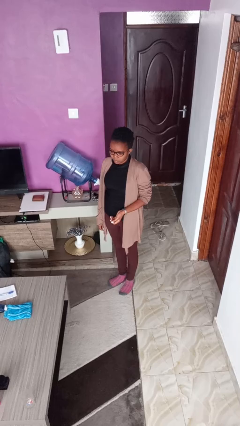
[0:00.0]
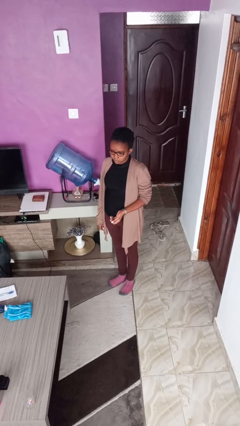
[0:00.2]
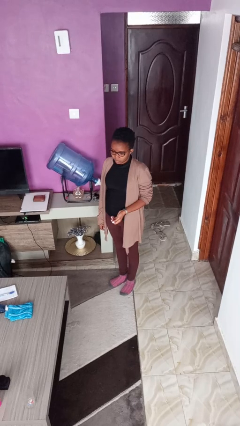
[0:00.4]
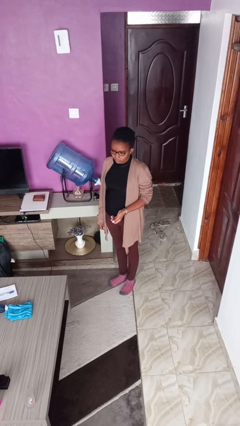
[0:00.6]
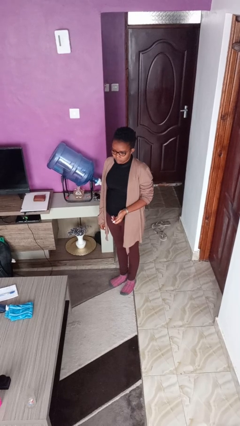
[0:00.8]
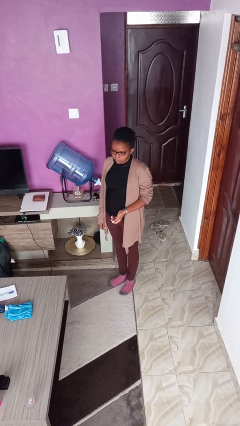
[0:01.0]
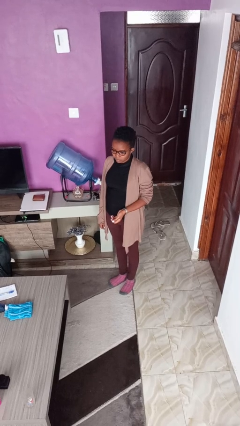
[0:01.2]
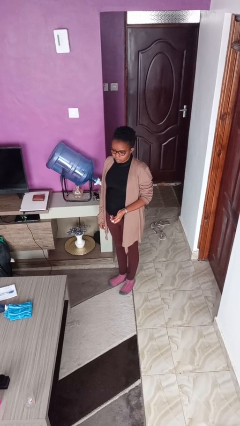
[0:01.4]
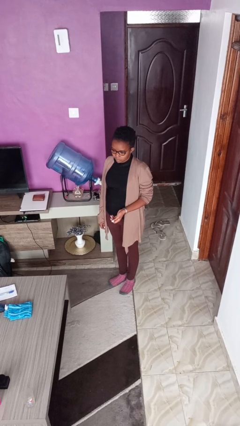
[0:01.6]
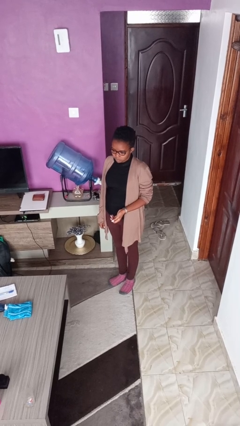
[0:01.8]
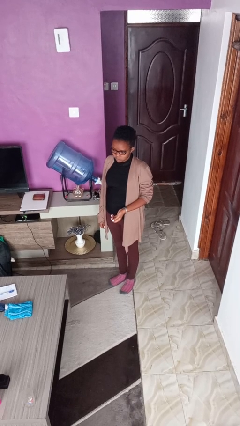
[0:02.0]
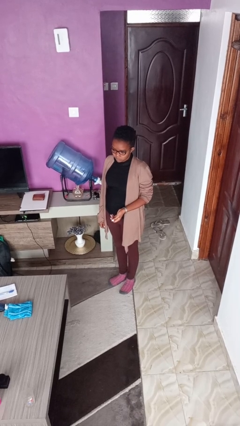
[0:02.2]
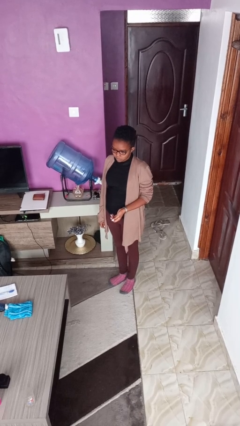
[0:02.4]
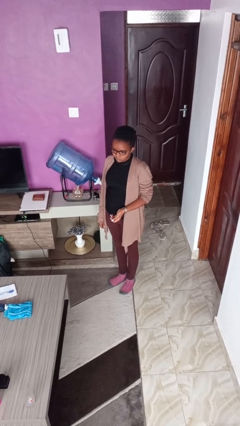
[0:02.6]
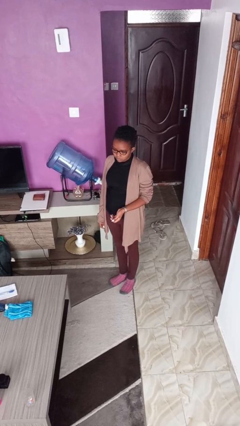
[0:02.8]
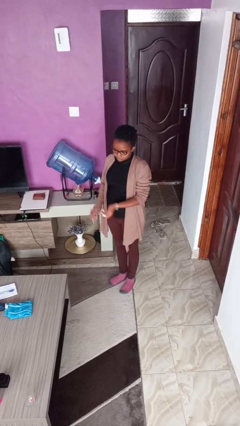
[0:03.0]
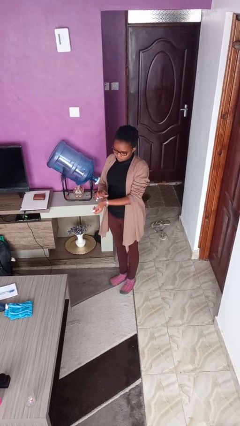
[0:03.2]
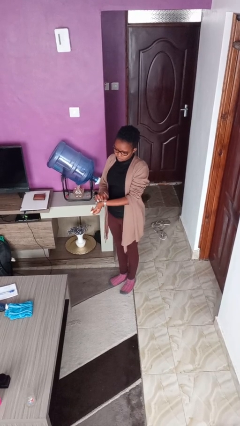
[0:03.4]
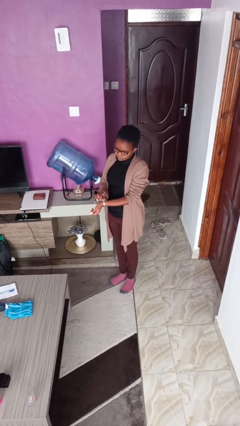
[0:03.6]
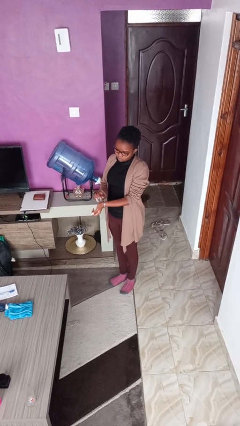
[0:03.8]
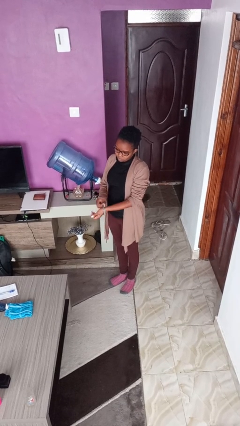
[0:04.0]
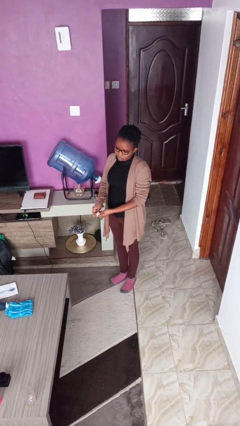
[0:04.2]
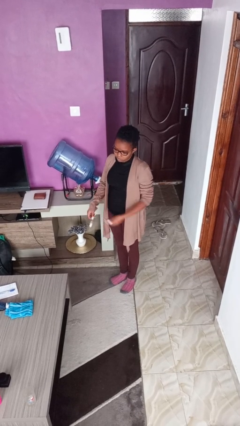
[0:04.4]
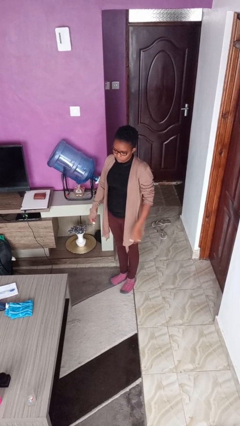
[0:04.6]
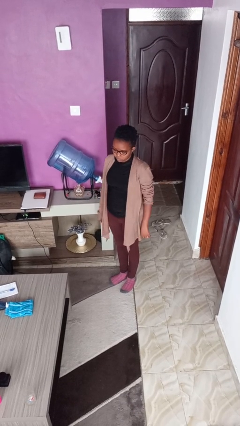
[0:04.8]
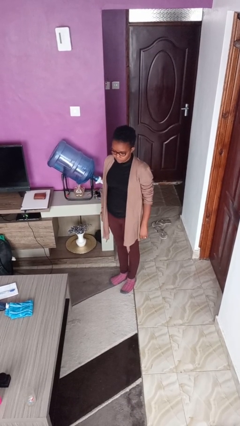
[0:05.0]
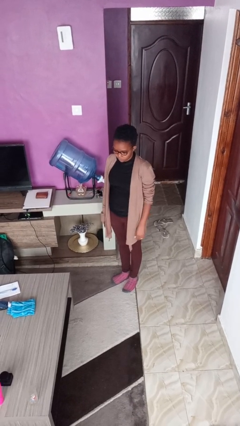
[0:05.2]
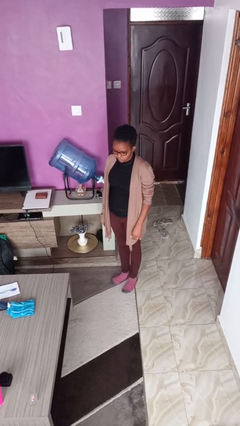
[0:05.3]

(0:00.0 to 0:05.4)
person takes off wristwatch

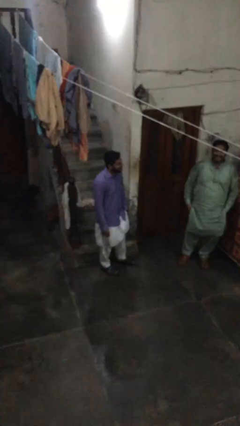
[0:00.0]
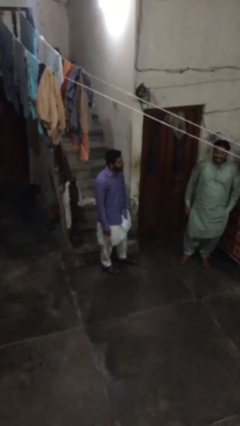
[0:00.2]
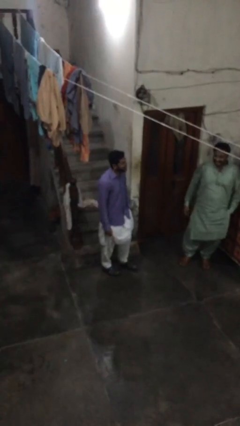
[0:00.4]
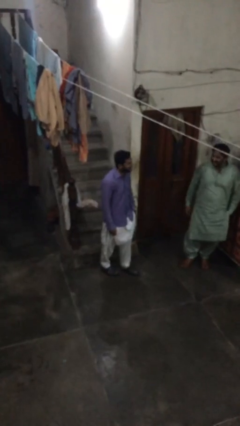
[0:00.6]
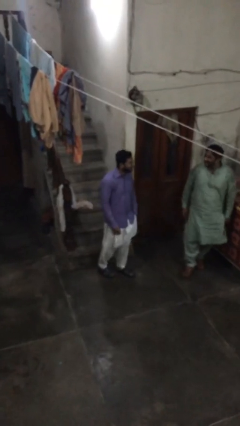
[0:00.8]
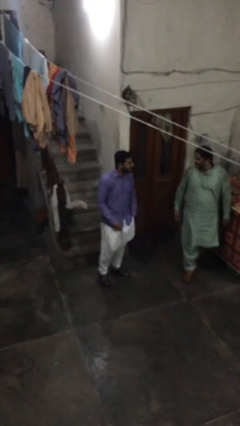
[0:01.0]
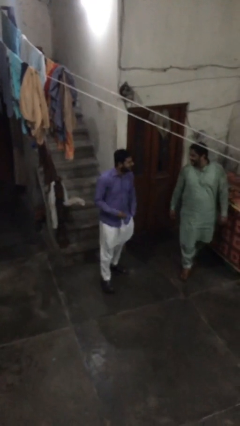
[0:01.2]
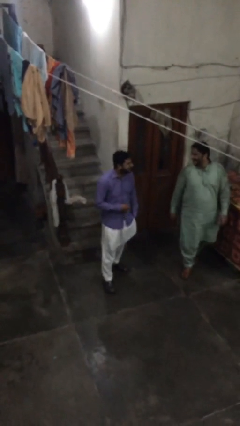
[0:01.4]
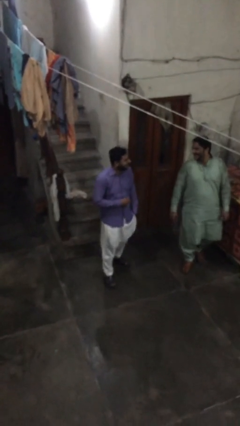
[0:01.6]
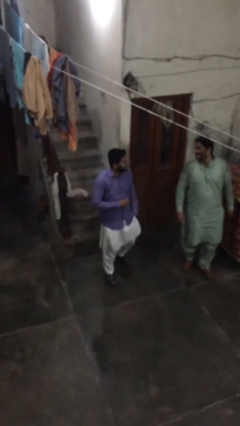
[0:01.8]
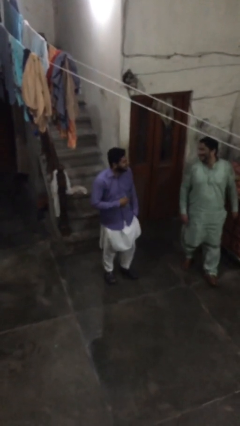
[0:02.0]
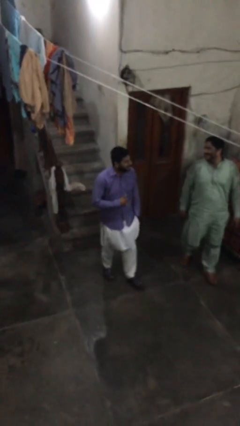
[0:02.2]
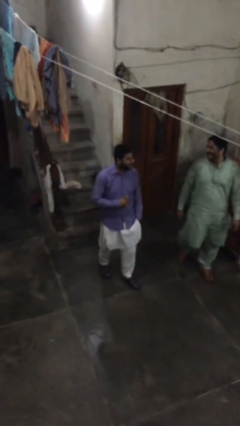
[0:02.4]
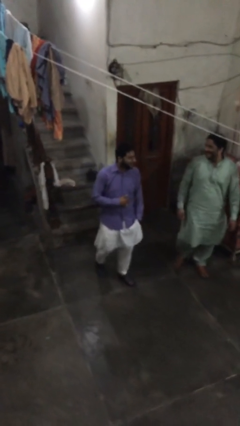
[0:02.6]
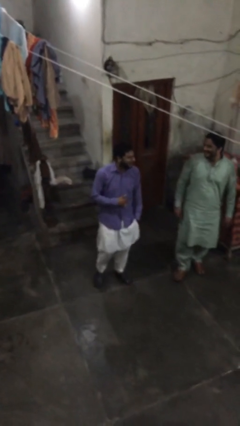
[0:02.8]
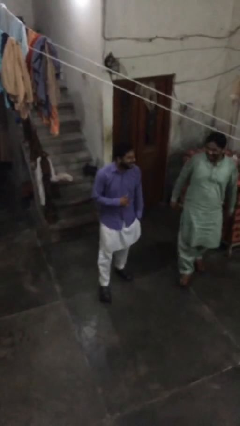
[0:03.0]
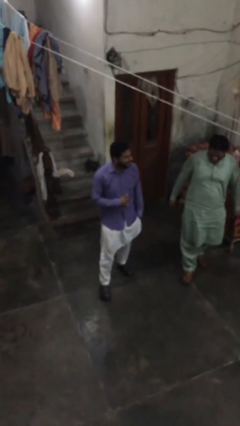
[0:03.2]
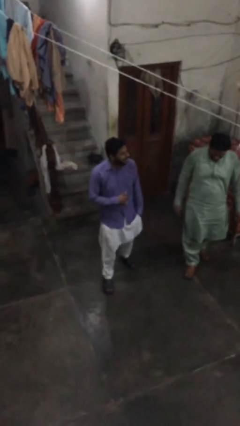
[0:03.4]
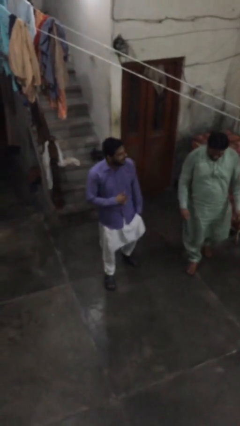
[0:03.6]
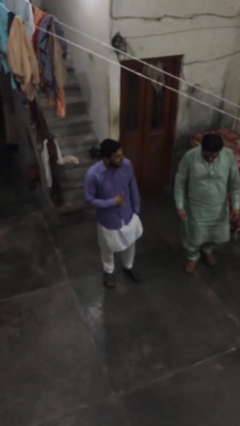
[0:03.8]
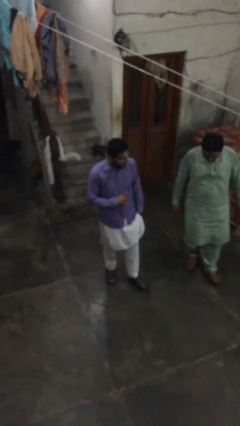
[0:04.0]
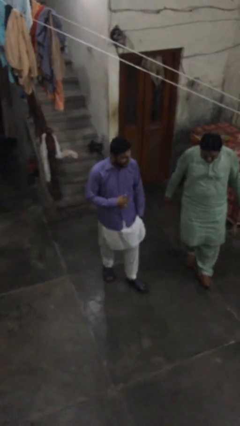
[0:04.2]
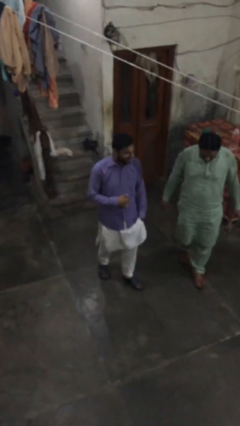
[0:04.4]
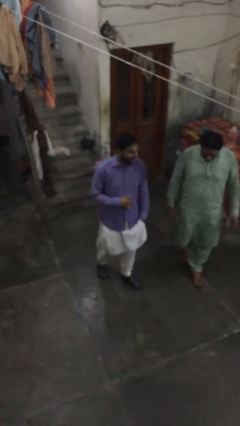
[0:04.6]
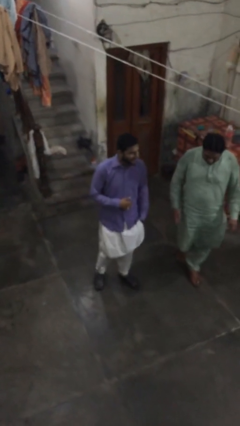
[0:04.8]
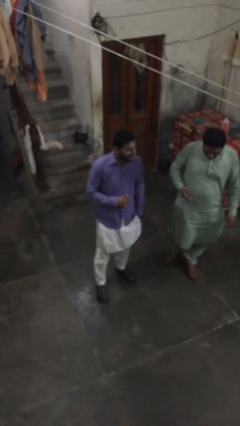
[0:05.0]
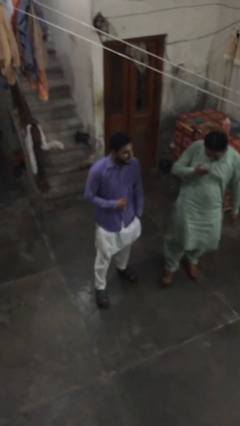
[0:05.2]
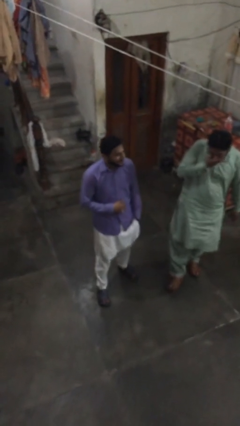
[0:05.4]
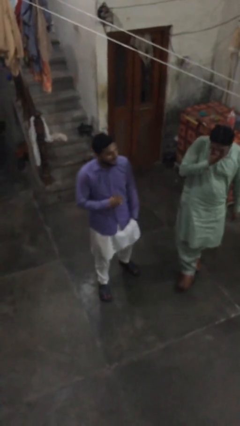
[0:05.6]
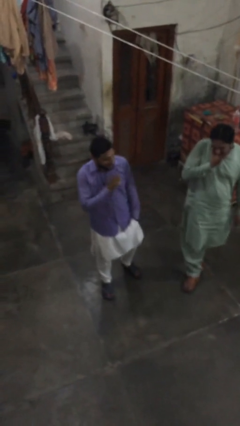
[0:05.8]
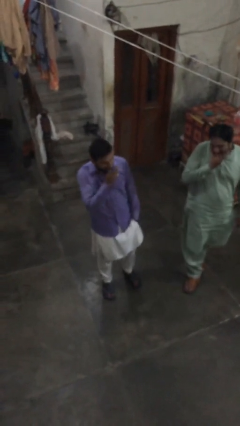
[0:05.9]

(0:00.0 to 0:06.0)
person talks to person

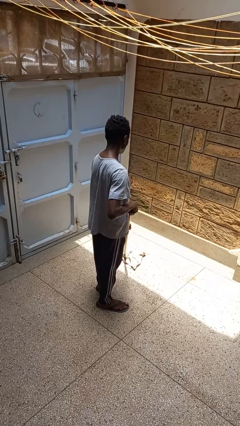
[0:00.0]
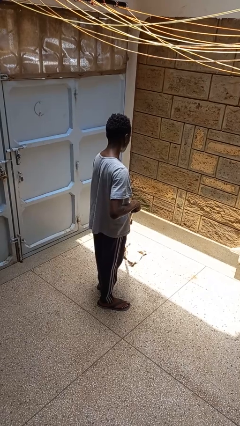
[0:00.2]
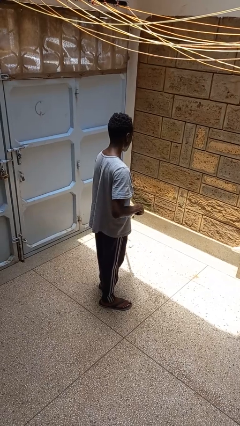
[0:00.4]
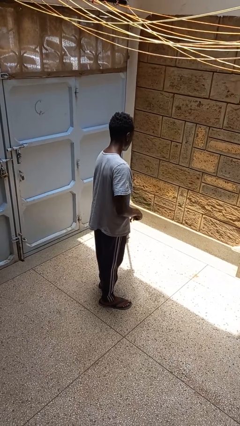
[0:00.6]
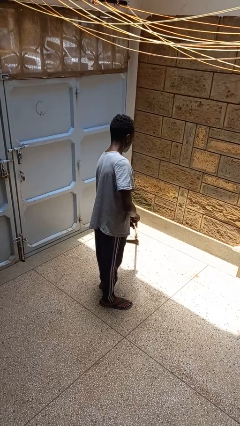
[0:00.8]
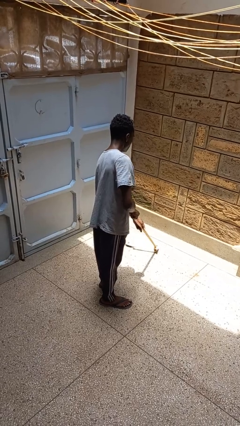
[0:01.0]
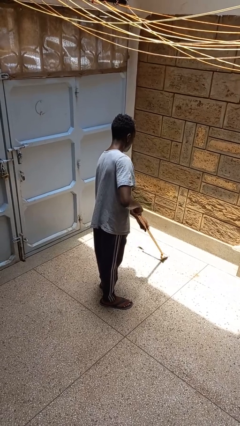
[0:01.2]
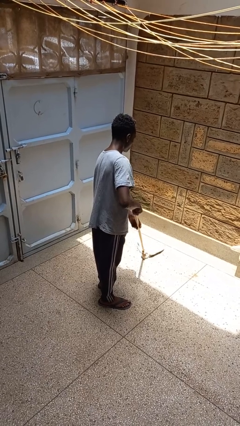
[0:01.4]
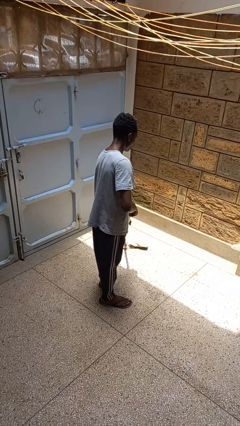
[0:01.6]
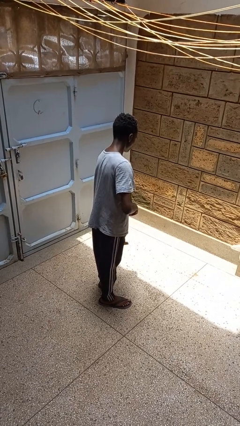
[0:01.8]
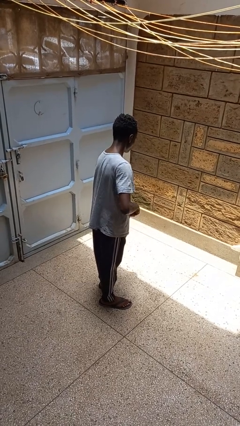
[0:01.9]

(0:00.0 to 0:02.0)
person mops

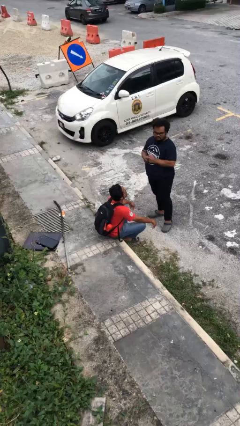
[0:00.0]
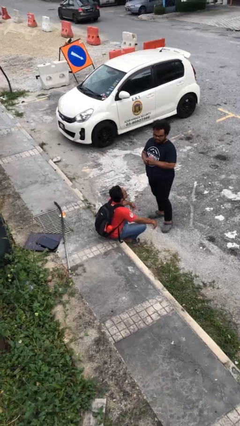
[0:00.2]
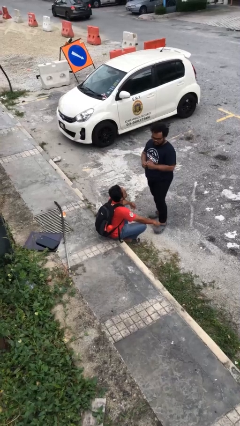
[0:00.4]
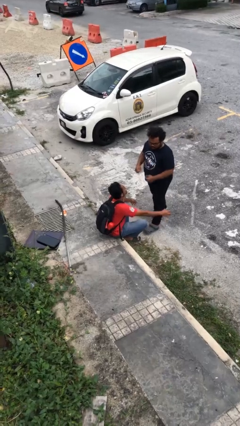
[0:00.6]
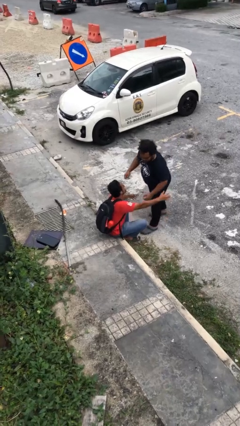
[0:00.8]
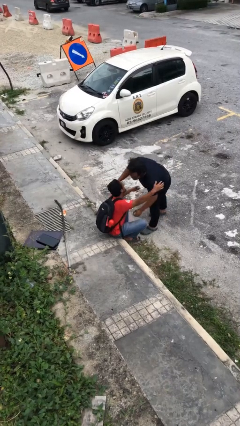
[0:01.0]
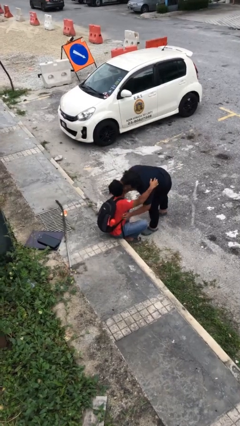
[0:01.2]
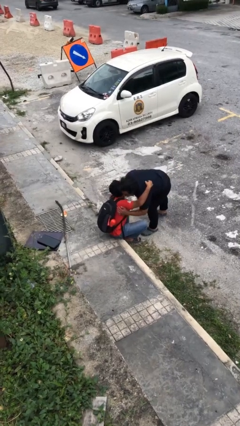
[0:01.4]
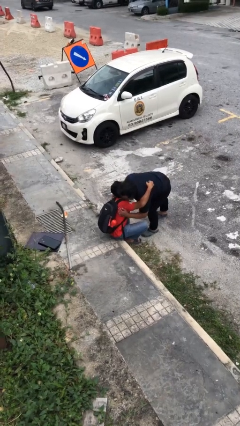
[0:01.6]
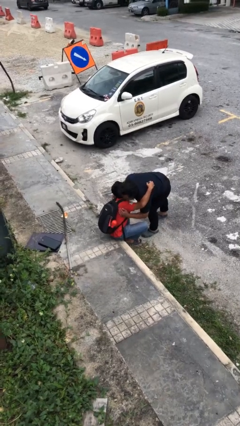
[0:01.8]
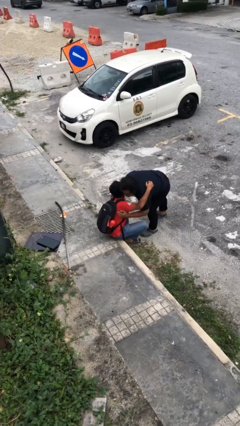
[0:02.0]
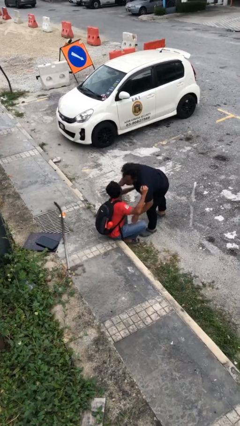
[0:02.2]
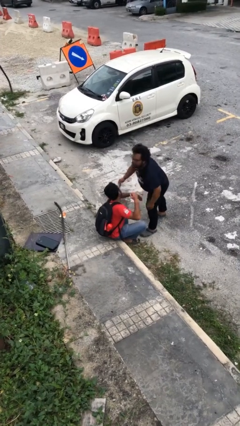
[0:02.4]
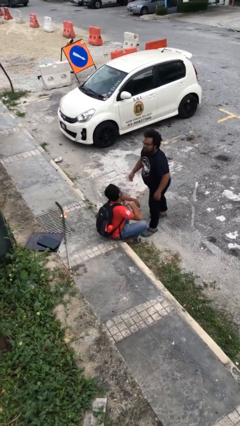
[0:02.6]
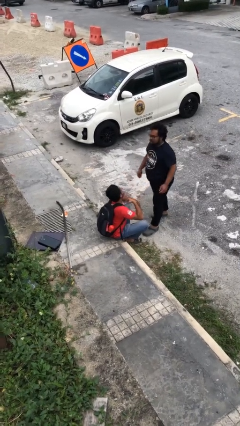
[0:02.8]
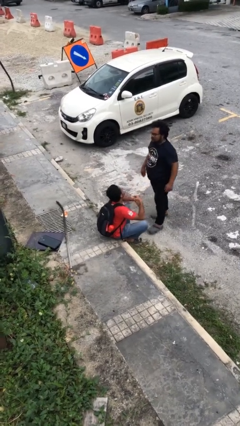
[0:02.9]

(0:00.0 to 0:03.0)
person embraces person

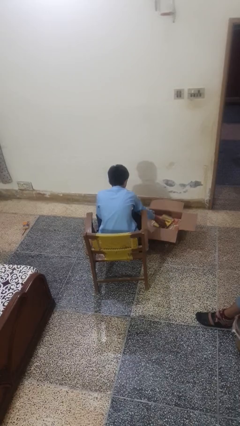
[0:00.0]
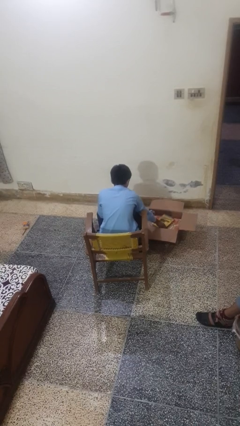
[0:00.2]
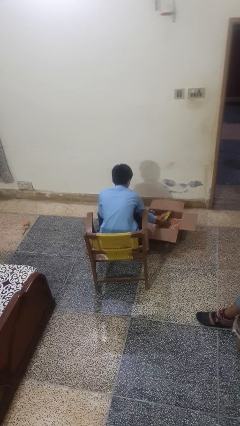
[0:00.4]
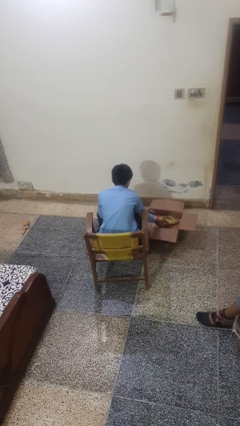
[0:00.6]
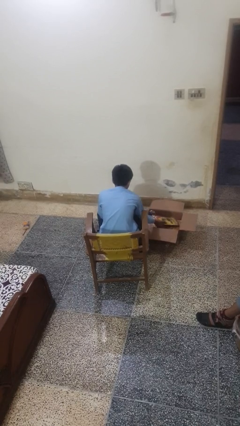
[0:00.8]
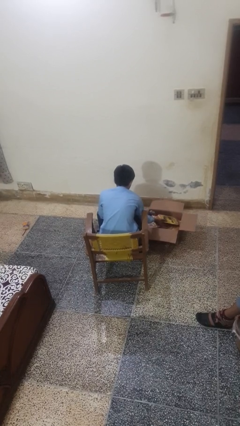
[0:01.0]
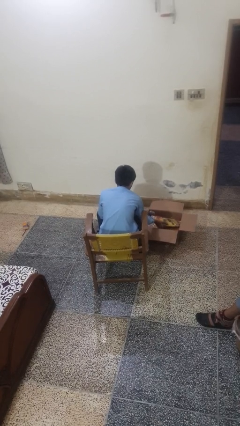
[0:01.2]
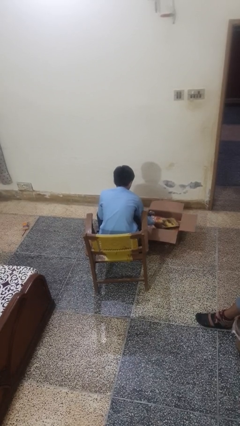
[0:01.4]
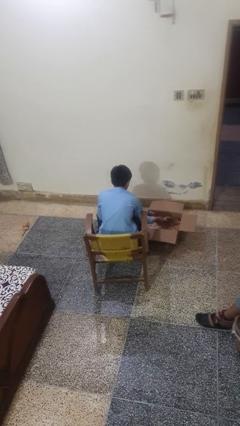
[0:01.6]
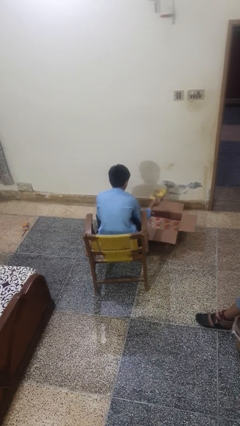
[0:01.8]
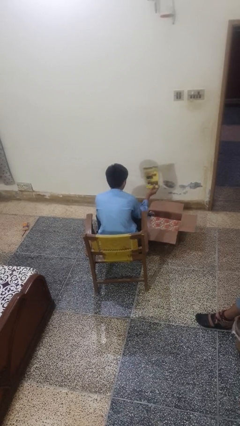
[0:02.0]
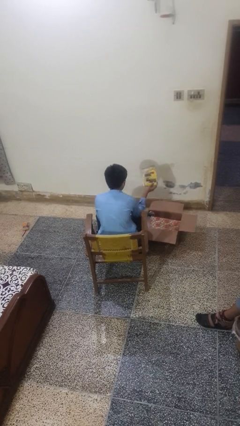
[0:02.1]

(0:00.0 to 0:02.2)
person takes object from box
